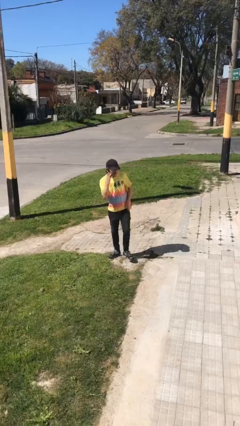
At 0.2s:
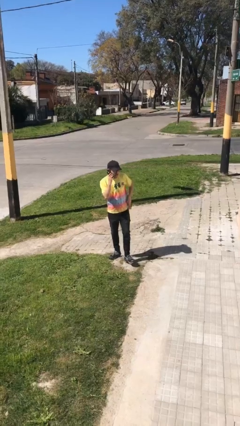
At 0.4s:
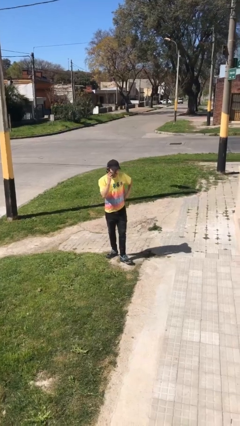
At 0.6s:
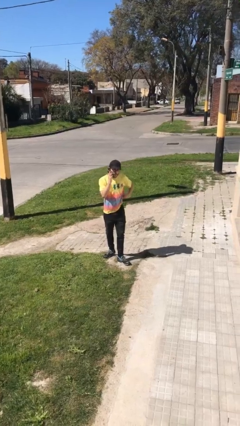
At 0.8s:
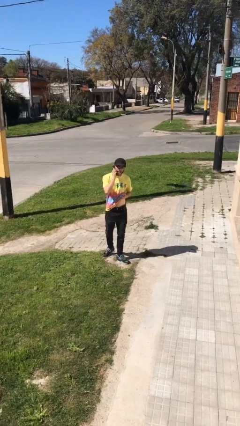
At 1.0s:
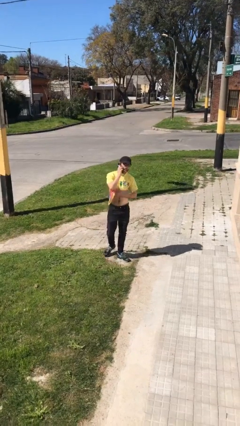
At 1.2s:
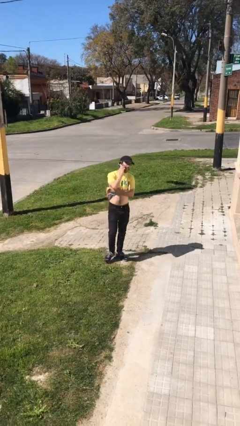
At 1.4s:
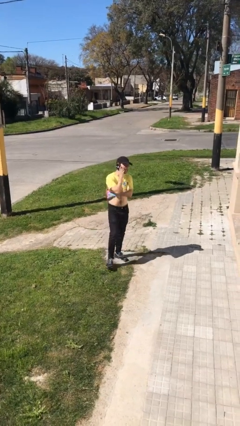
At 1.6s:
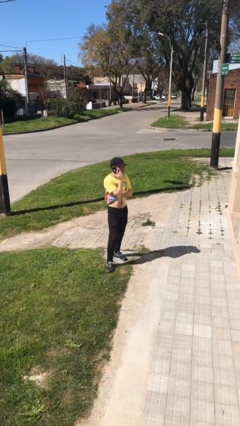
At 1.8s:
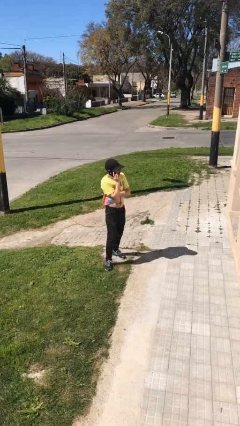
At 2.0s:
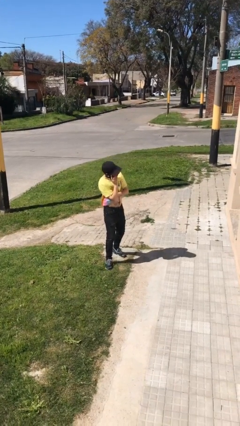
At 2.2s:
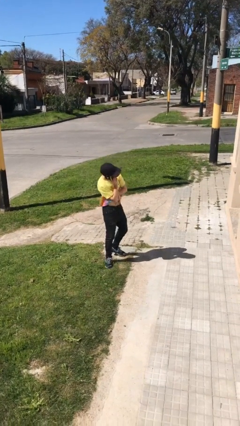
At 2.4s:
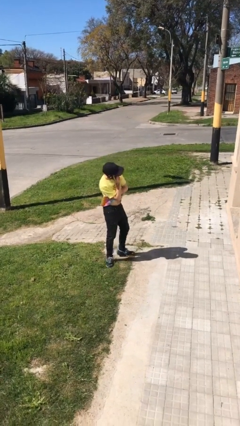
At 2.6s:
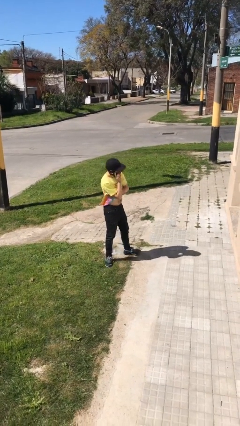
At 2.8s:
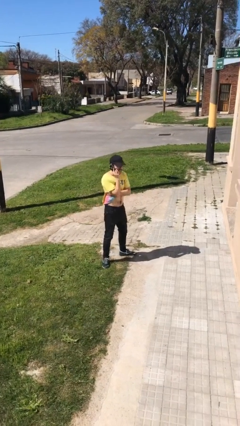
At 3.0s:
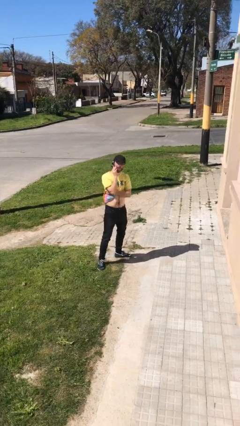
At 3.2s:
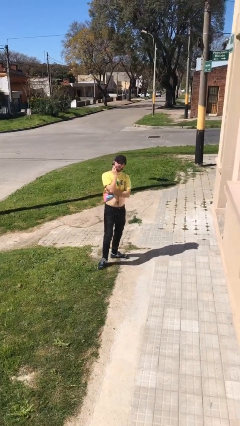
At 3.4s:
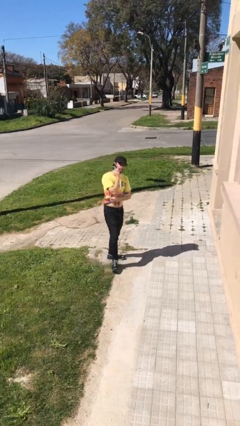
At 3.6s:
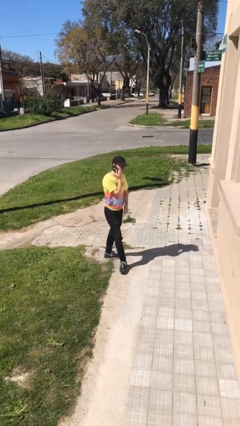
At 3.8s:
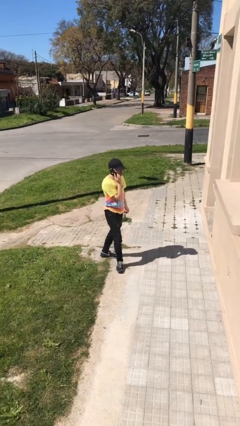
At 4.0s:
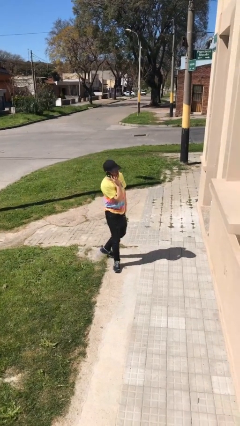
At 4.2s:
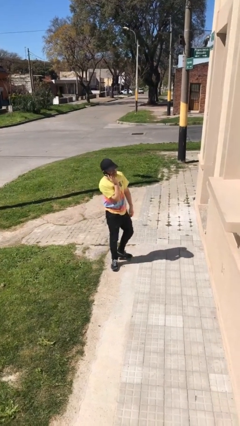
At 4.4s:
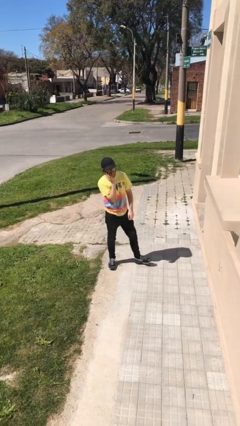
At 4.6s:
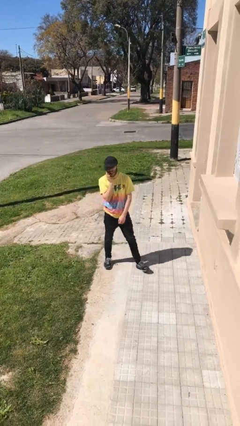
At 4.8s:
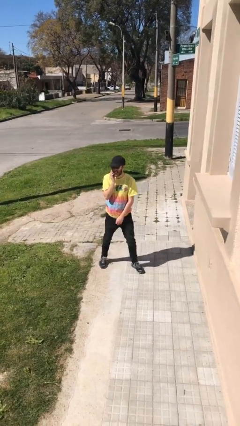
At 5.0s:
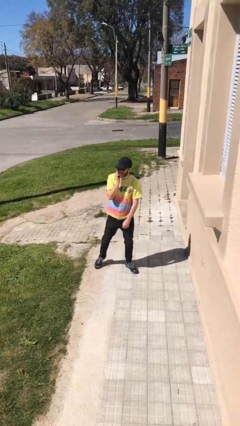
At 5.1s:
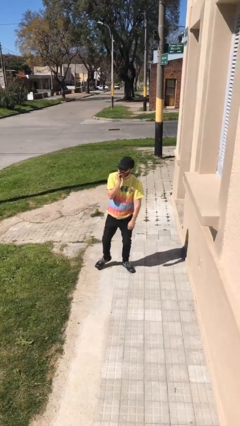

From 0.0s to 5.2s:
person talks on phone

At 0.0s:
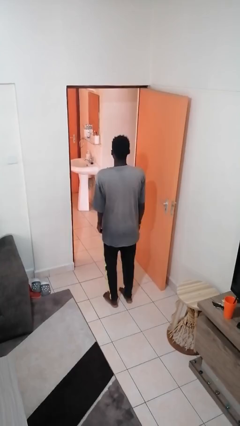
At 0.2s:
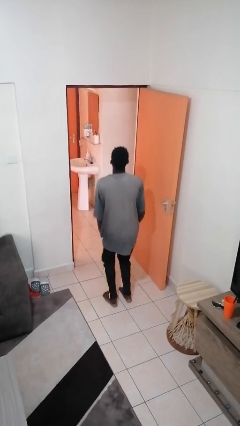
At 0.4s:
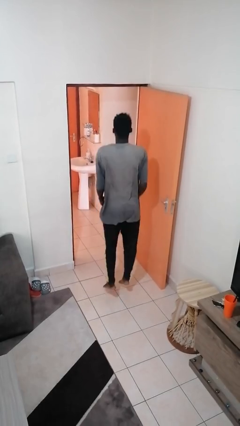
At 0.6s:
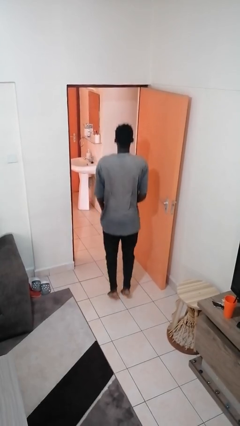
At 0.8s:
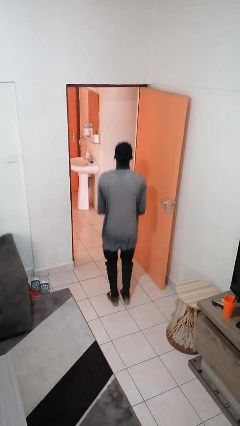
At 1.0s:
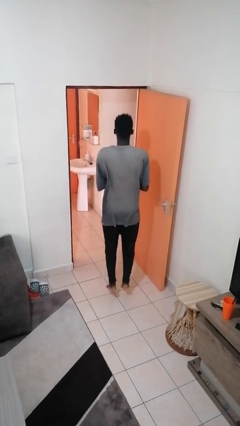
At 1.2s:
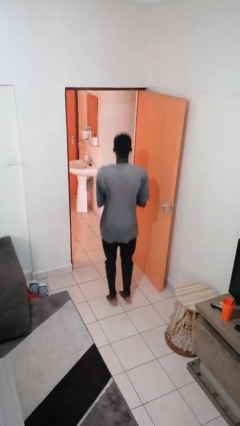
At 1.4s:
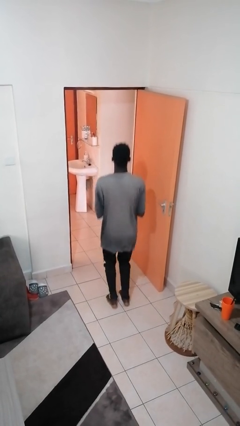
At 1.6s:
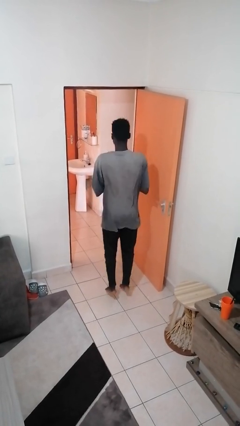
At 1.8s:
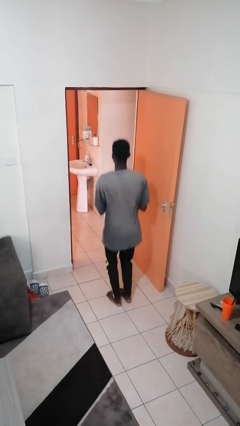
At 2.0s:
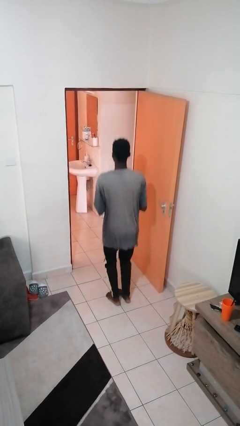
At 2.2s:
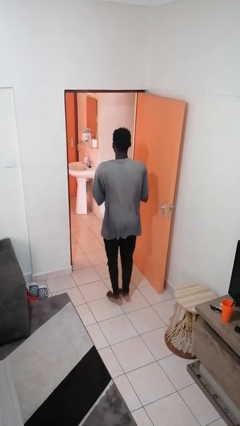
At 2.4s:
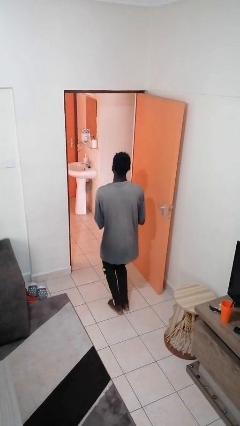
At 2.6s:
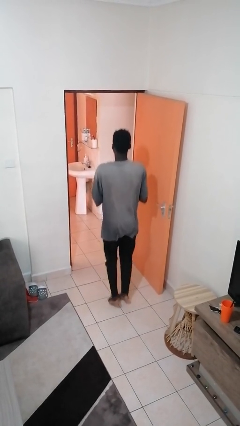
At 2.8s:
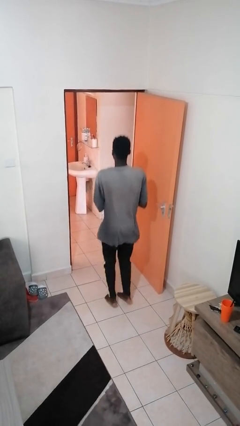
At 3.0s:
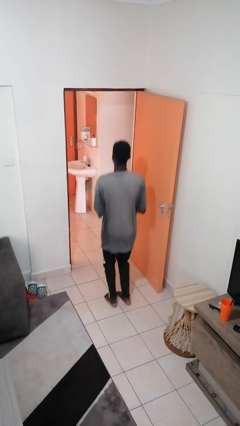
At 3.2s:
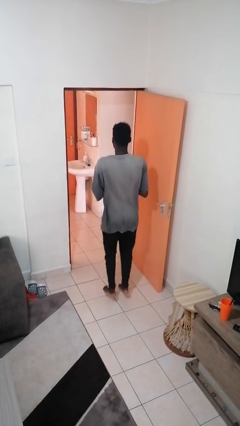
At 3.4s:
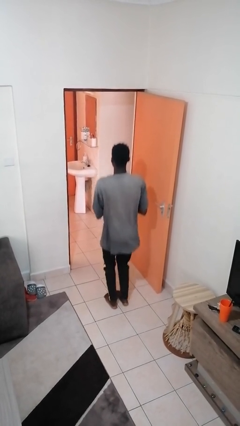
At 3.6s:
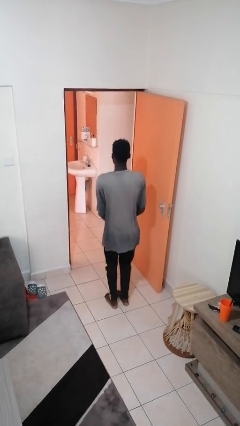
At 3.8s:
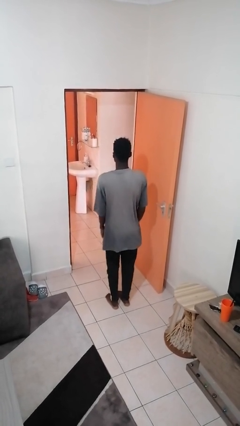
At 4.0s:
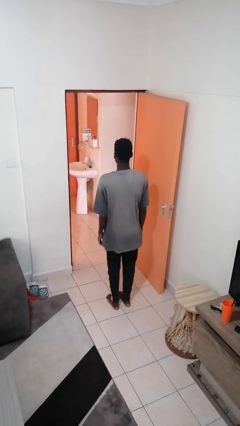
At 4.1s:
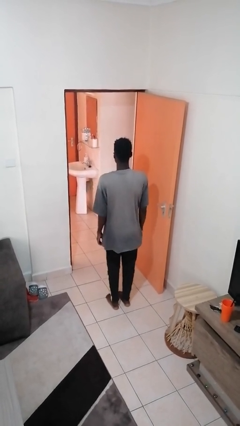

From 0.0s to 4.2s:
person jumps

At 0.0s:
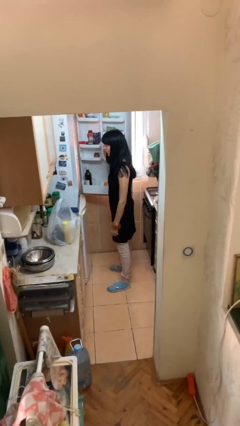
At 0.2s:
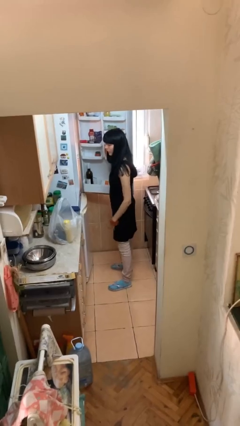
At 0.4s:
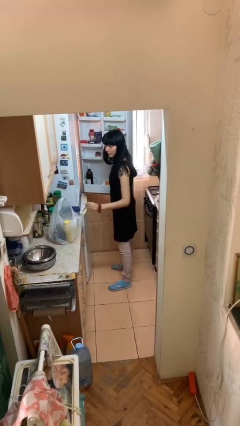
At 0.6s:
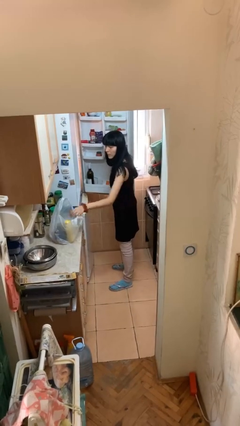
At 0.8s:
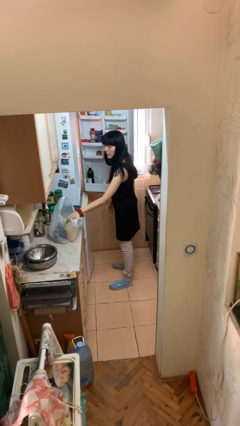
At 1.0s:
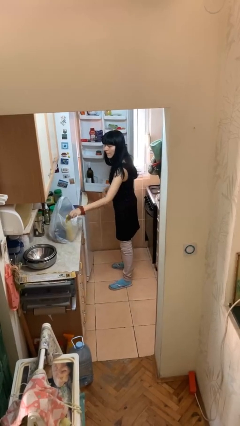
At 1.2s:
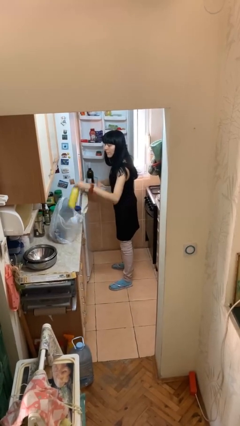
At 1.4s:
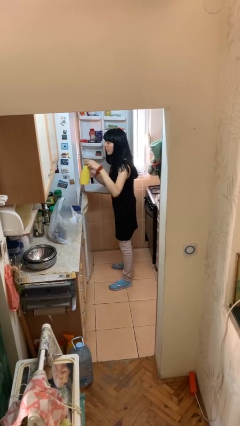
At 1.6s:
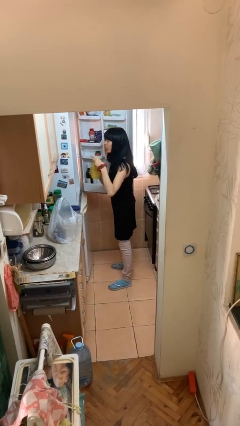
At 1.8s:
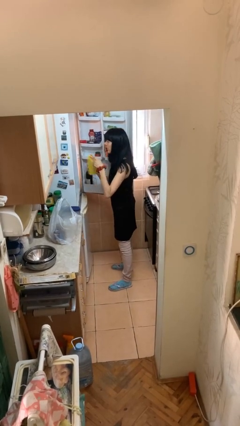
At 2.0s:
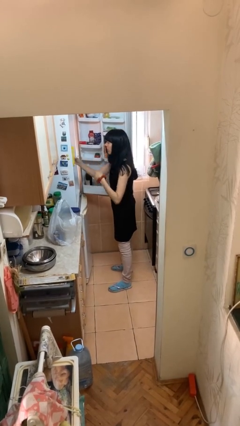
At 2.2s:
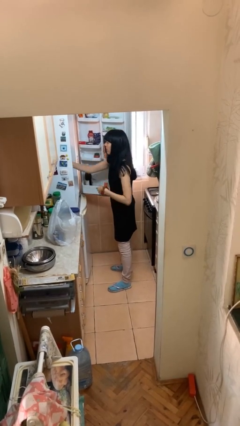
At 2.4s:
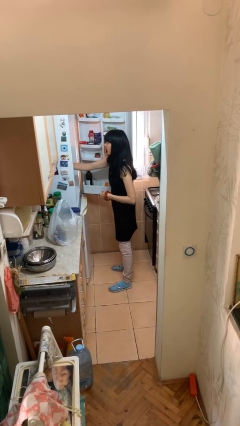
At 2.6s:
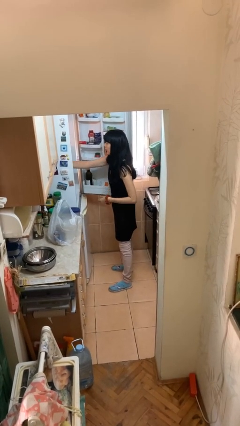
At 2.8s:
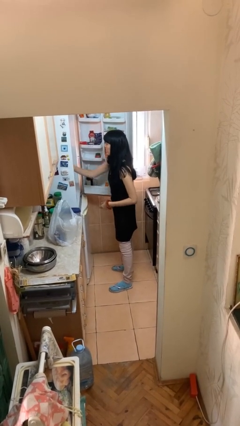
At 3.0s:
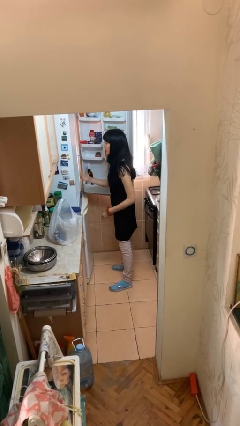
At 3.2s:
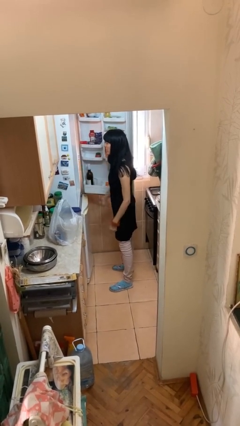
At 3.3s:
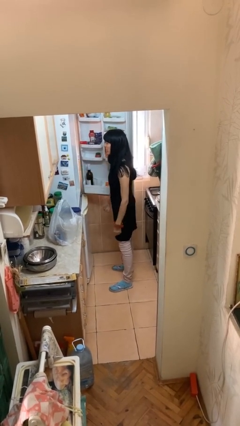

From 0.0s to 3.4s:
person loads groceries into refrigerator

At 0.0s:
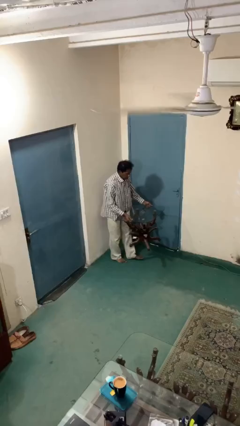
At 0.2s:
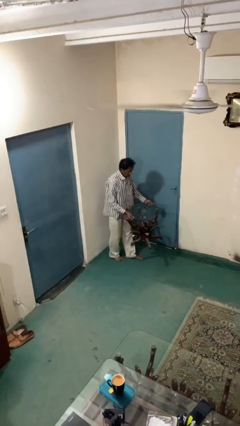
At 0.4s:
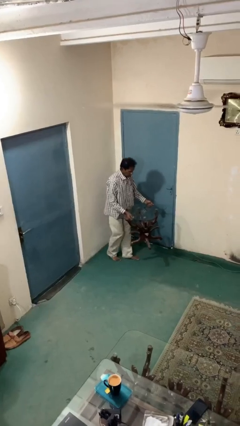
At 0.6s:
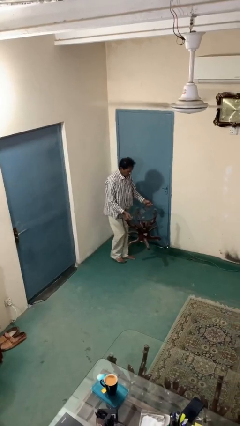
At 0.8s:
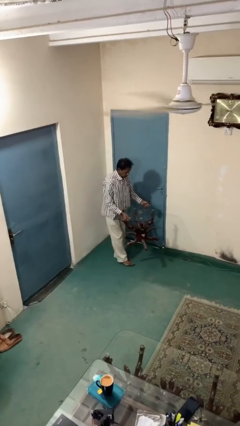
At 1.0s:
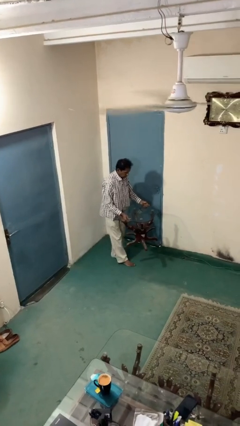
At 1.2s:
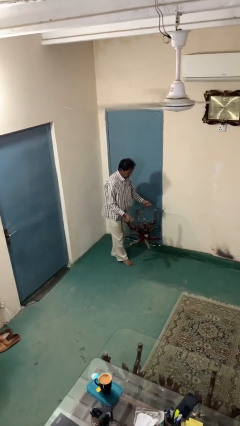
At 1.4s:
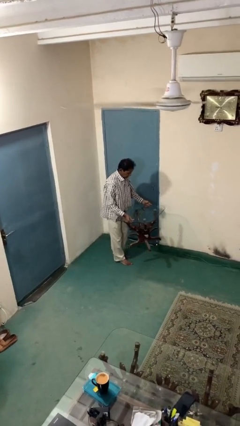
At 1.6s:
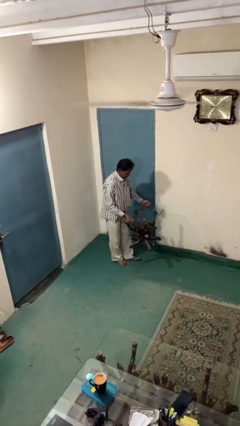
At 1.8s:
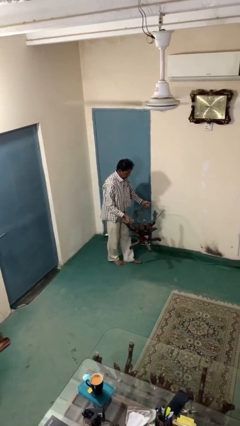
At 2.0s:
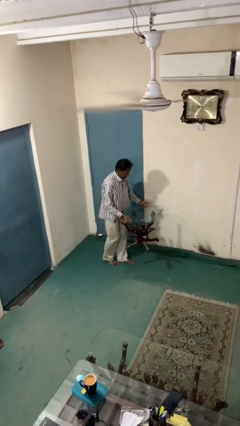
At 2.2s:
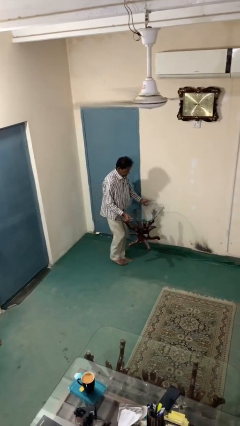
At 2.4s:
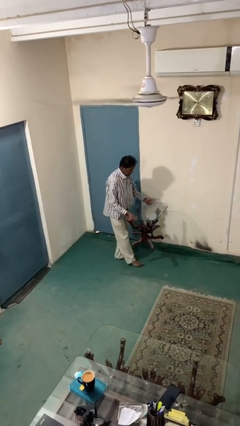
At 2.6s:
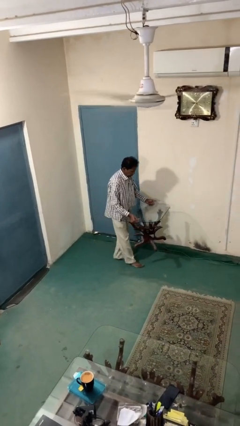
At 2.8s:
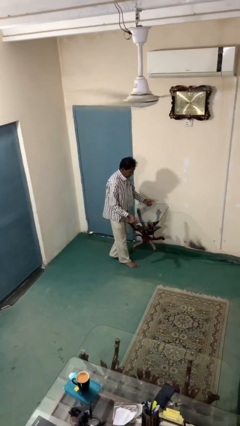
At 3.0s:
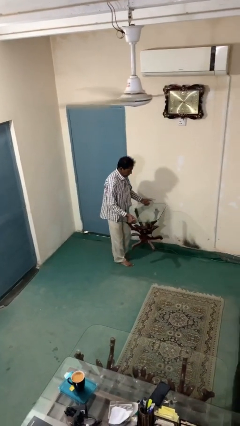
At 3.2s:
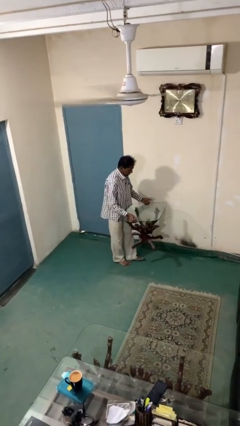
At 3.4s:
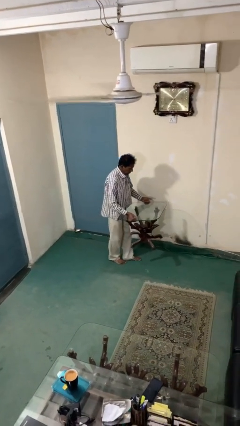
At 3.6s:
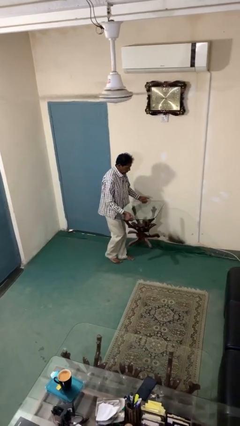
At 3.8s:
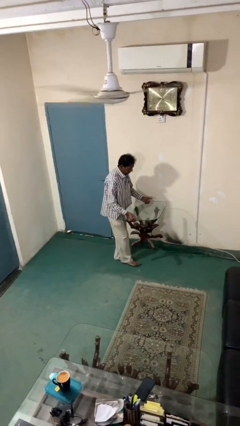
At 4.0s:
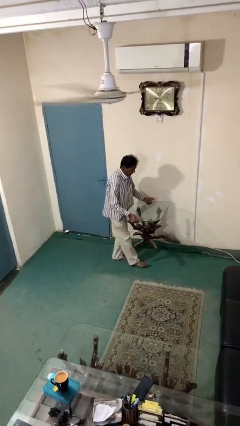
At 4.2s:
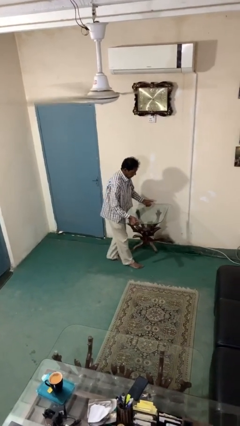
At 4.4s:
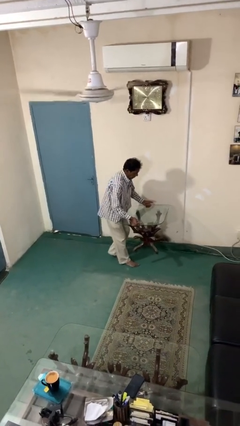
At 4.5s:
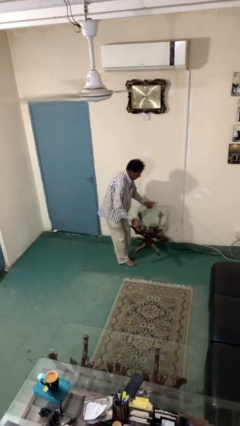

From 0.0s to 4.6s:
person carries heavy object

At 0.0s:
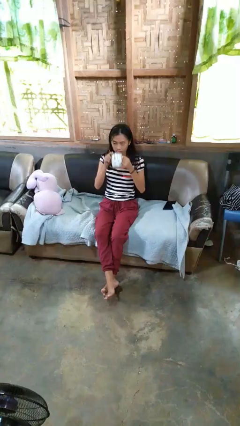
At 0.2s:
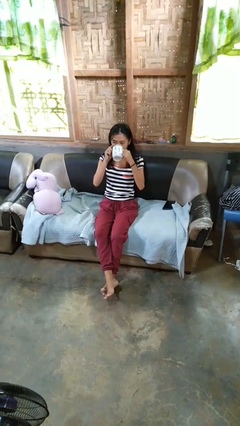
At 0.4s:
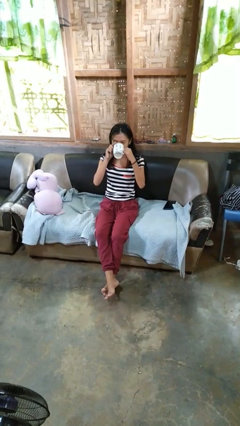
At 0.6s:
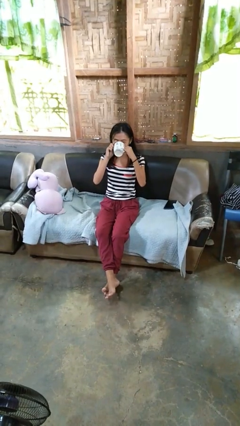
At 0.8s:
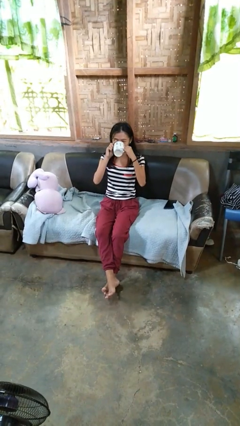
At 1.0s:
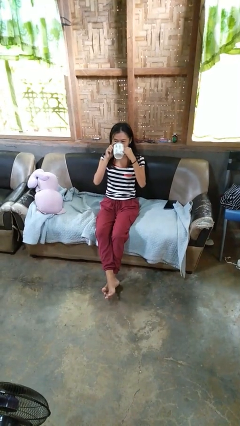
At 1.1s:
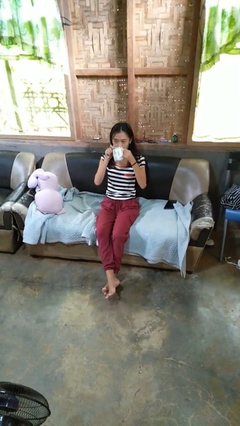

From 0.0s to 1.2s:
person drinks from mug
